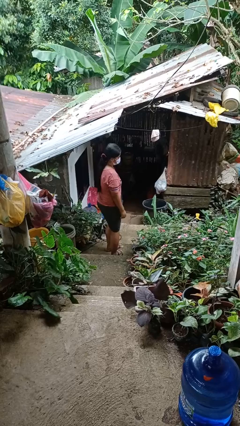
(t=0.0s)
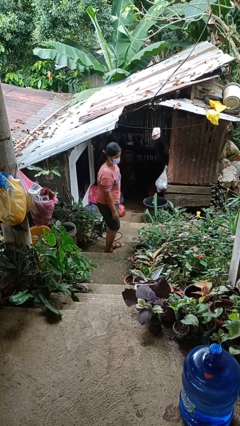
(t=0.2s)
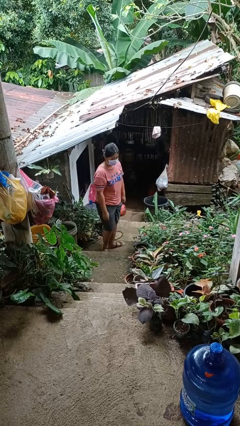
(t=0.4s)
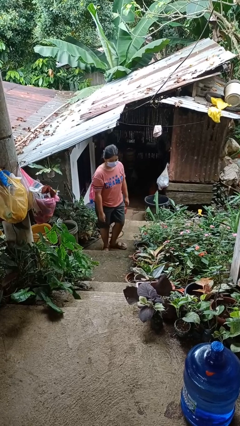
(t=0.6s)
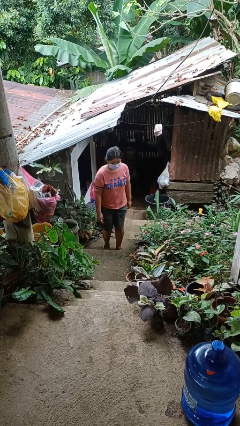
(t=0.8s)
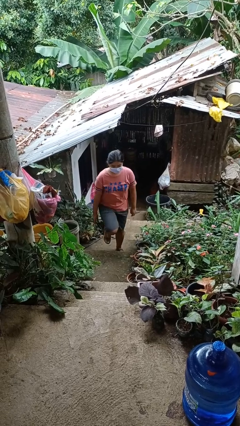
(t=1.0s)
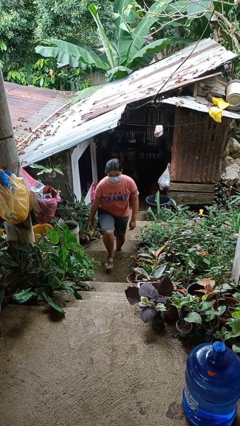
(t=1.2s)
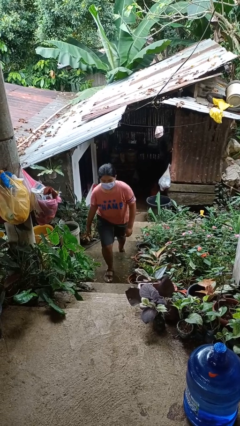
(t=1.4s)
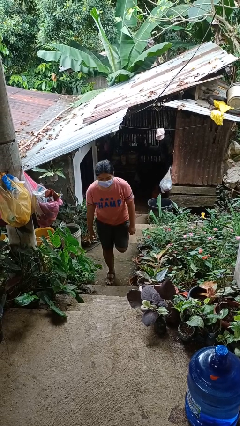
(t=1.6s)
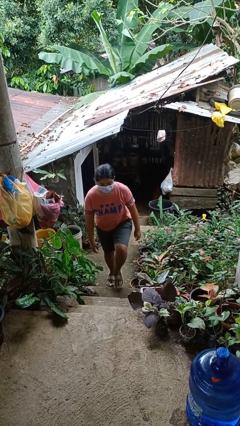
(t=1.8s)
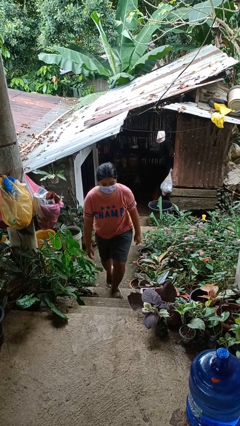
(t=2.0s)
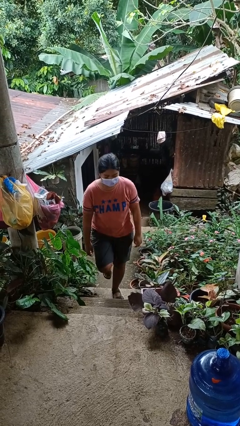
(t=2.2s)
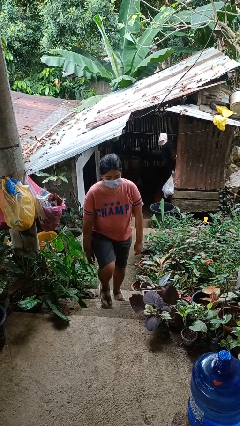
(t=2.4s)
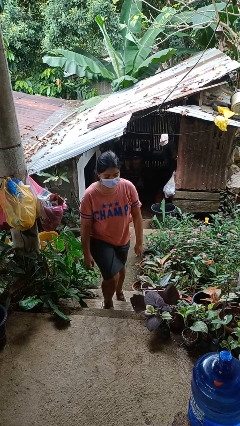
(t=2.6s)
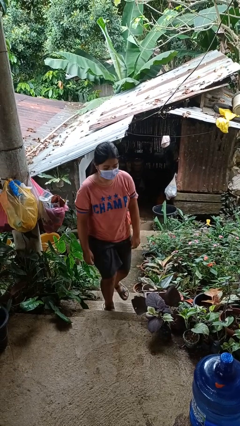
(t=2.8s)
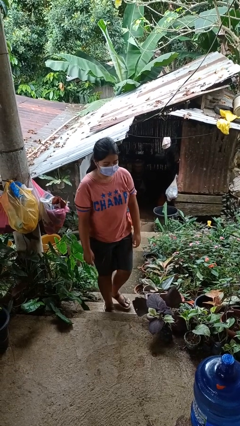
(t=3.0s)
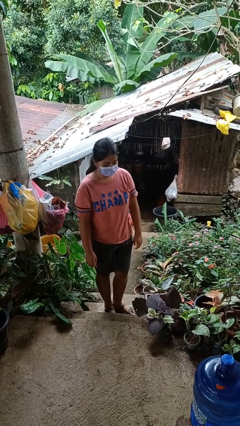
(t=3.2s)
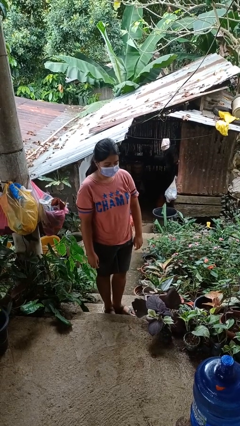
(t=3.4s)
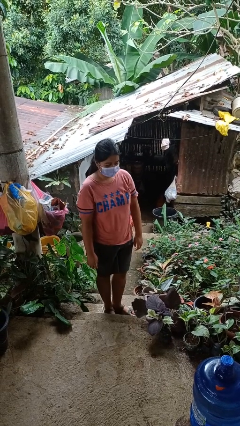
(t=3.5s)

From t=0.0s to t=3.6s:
person climbs up stairs

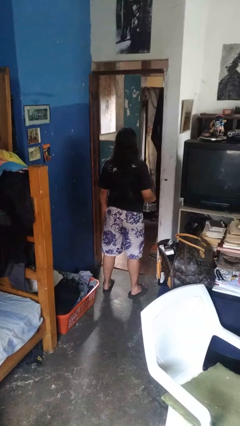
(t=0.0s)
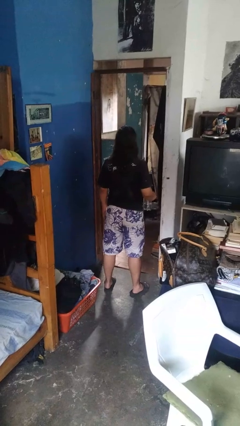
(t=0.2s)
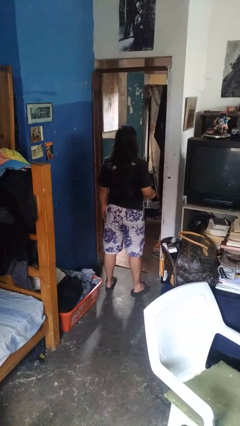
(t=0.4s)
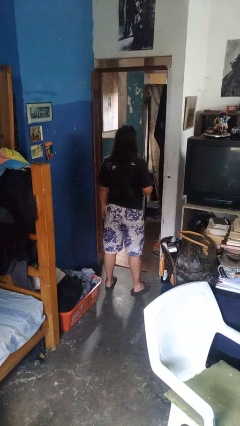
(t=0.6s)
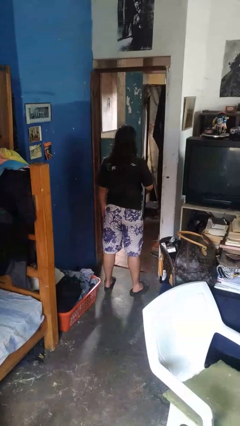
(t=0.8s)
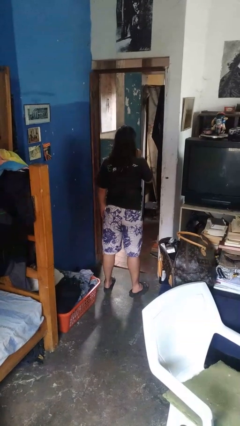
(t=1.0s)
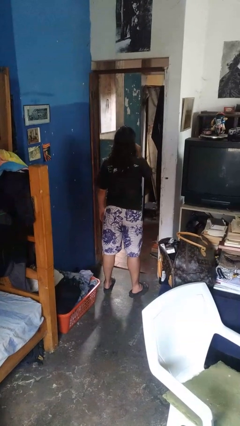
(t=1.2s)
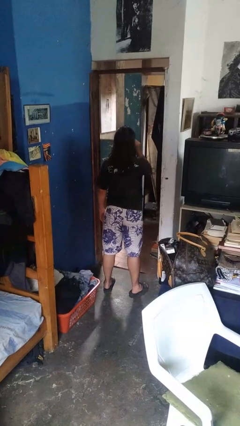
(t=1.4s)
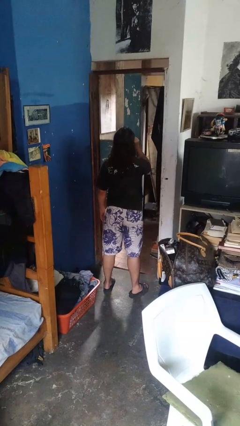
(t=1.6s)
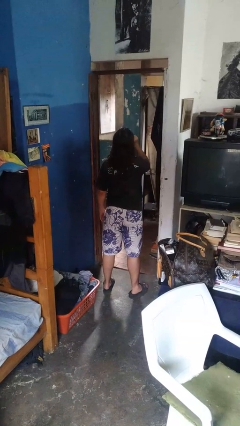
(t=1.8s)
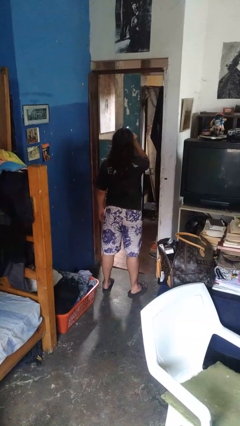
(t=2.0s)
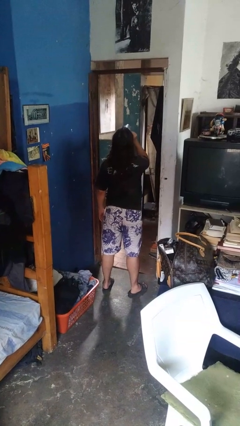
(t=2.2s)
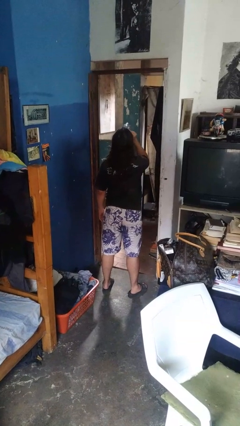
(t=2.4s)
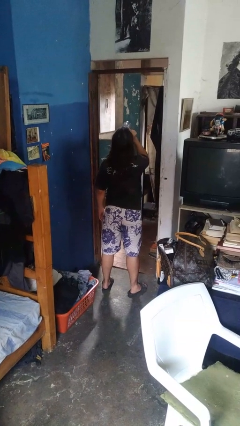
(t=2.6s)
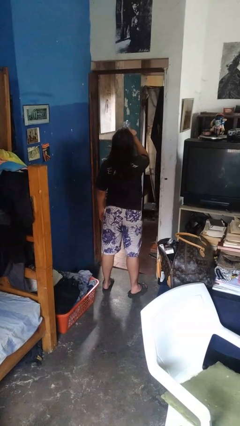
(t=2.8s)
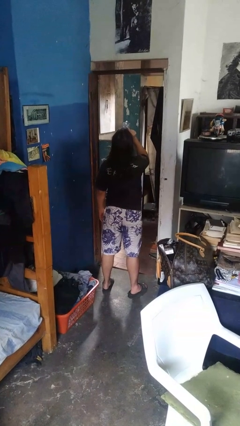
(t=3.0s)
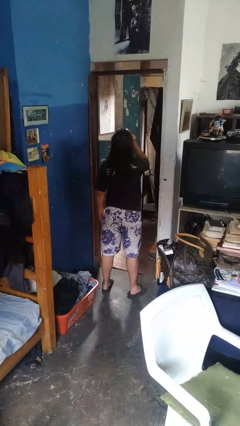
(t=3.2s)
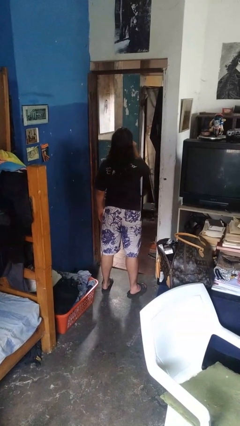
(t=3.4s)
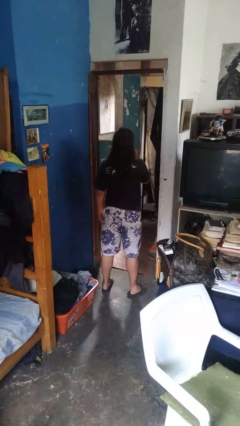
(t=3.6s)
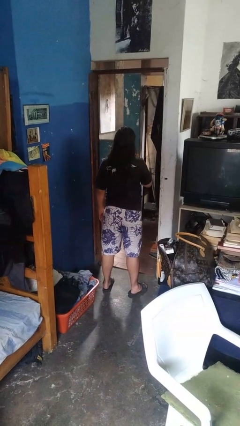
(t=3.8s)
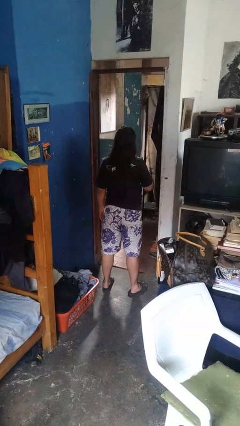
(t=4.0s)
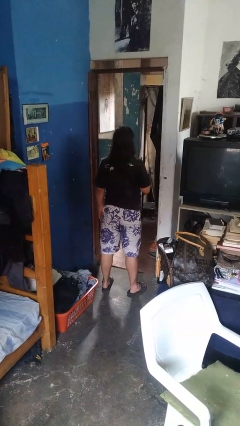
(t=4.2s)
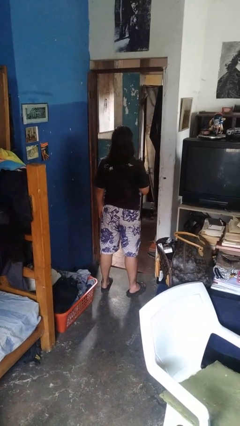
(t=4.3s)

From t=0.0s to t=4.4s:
person drinks from bottle

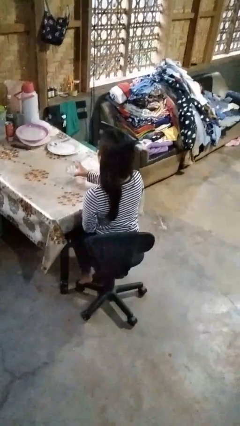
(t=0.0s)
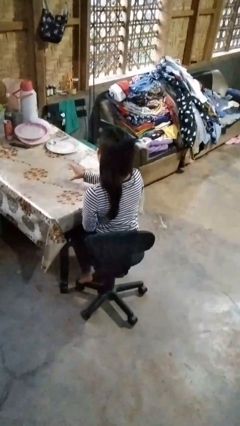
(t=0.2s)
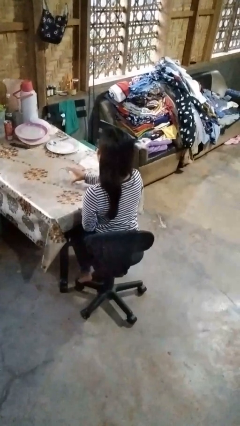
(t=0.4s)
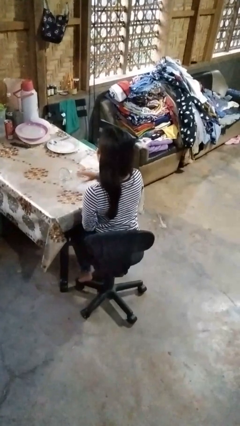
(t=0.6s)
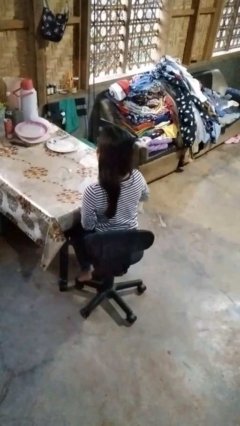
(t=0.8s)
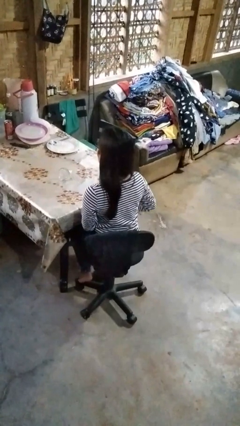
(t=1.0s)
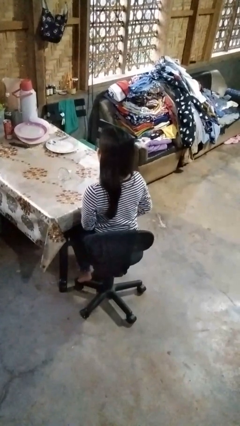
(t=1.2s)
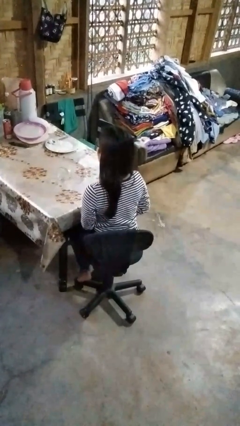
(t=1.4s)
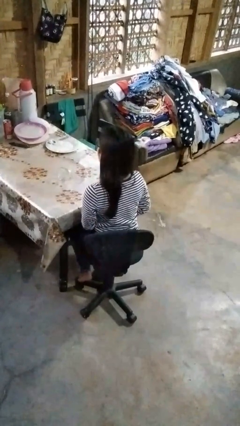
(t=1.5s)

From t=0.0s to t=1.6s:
person knocks over glass

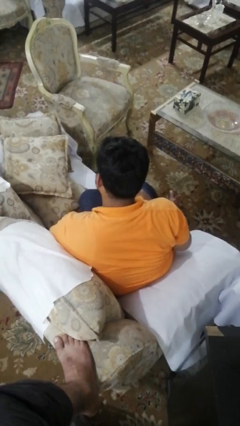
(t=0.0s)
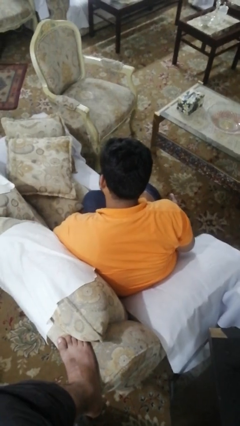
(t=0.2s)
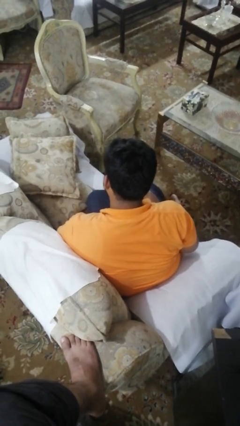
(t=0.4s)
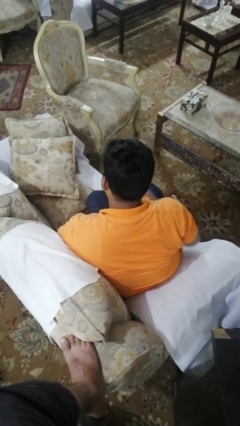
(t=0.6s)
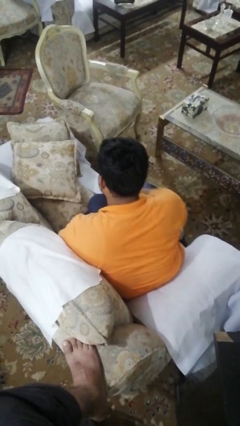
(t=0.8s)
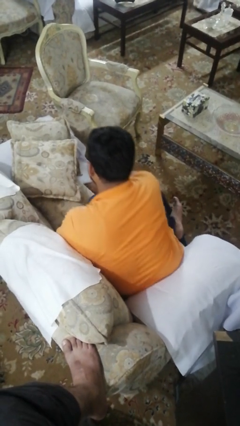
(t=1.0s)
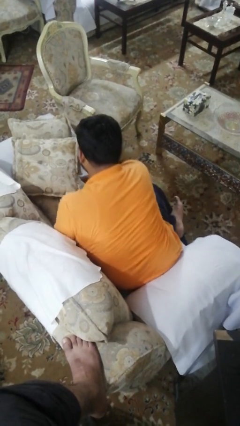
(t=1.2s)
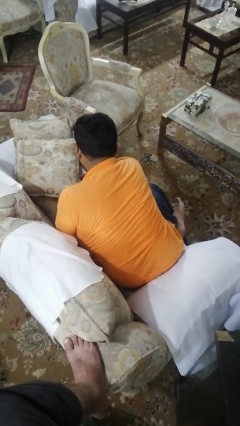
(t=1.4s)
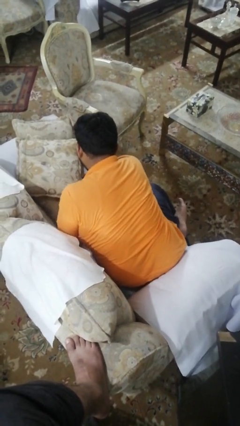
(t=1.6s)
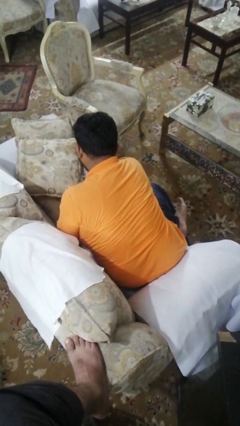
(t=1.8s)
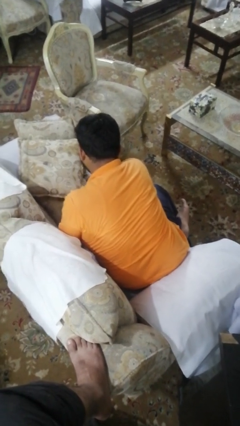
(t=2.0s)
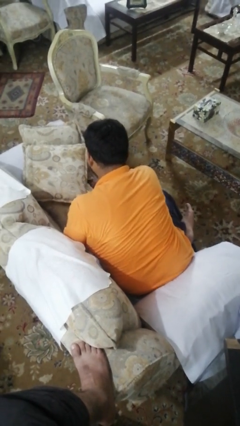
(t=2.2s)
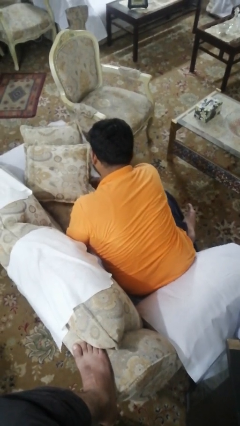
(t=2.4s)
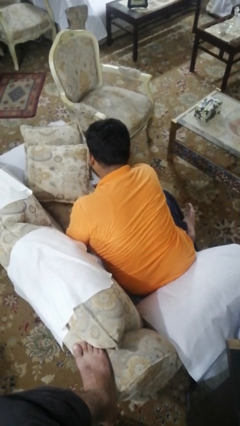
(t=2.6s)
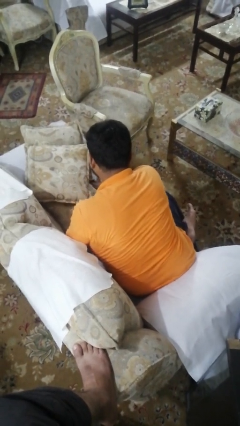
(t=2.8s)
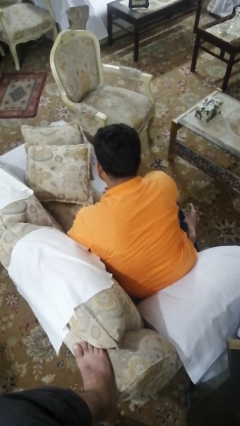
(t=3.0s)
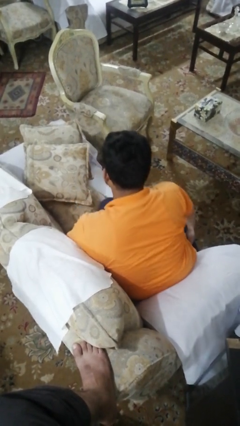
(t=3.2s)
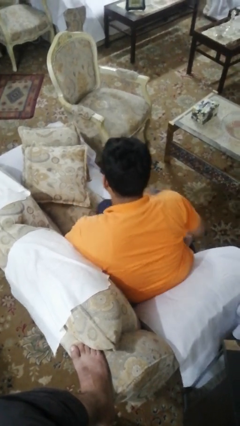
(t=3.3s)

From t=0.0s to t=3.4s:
person searches in couch

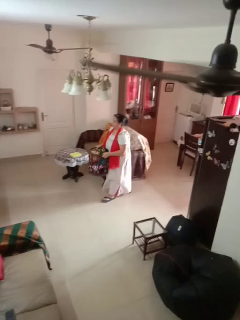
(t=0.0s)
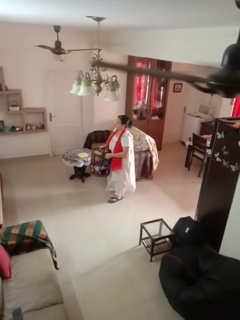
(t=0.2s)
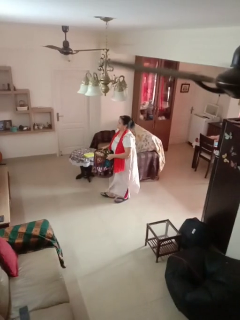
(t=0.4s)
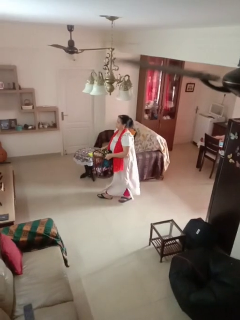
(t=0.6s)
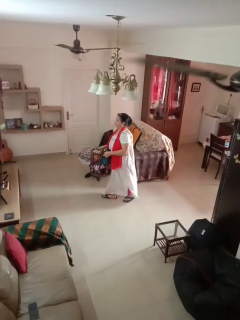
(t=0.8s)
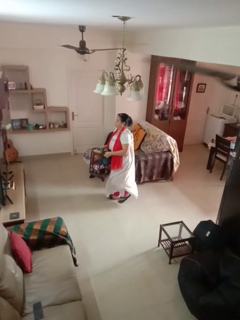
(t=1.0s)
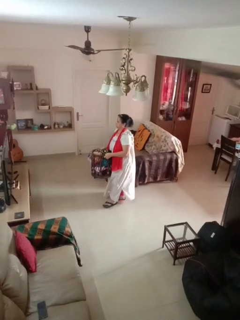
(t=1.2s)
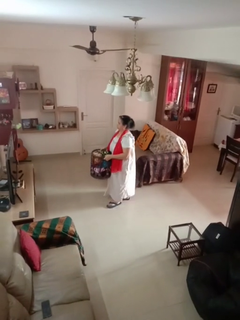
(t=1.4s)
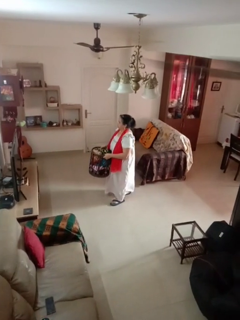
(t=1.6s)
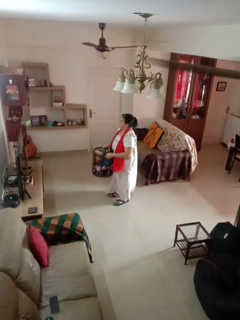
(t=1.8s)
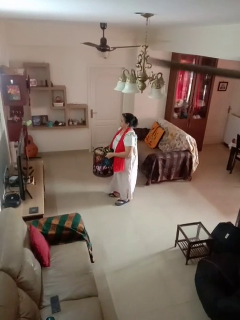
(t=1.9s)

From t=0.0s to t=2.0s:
person carries laundry basket

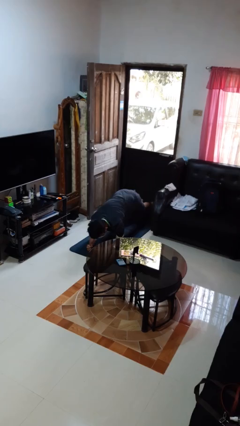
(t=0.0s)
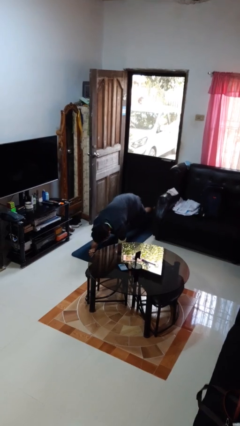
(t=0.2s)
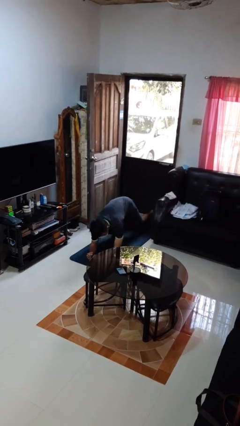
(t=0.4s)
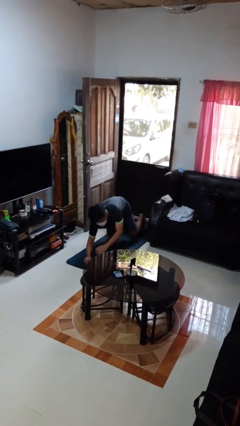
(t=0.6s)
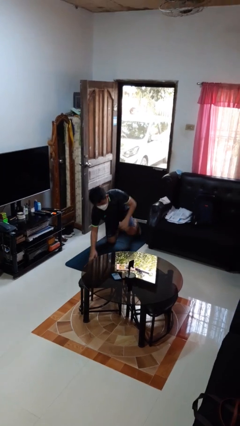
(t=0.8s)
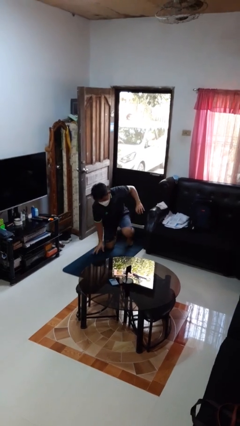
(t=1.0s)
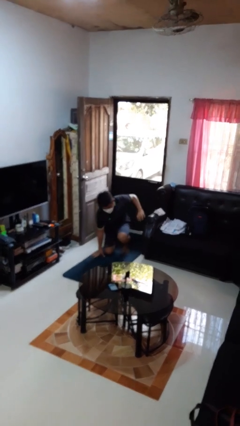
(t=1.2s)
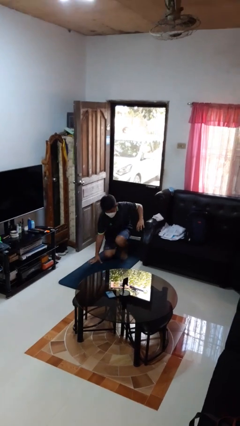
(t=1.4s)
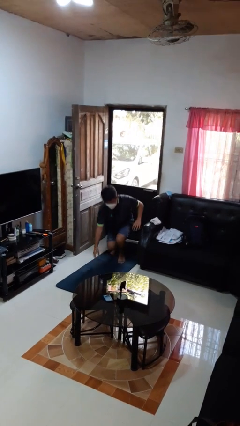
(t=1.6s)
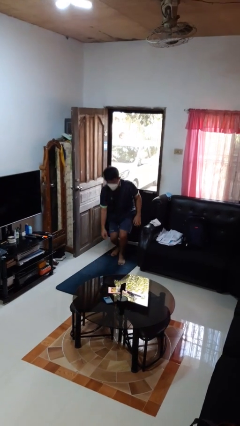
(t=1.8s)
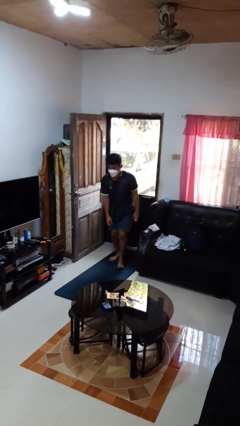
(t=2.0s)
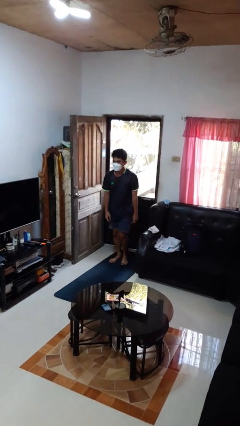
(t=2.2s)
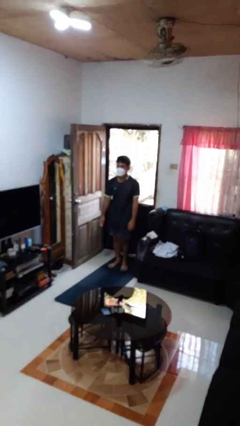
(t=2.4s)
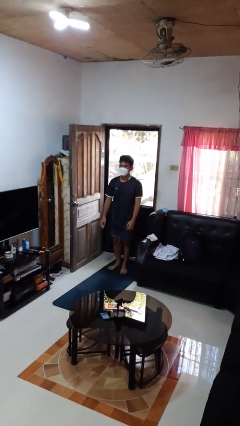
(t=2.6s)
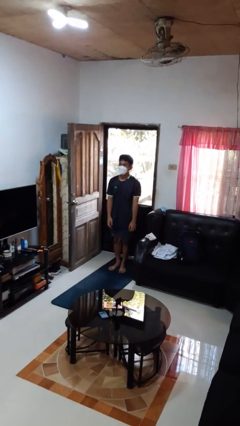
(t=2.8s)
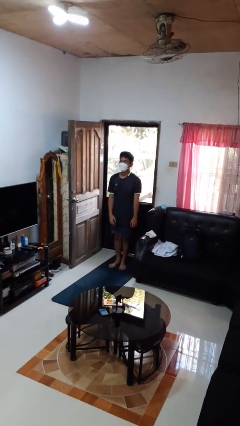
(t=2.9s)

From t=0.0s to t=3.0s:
person stands up from floor
